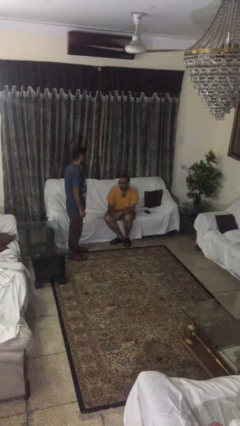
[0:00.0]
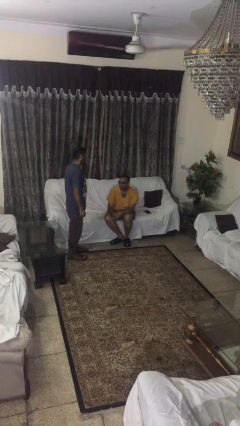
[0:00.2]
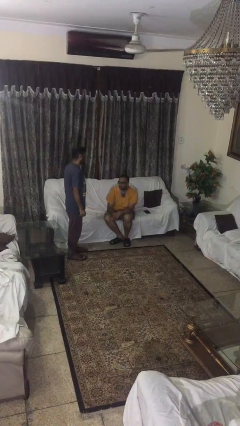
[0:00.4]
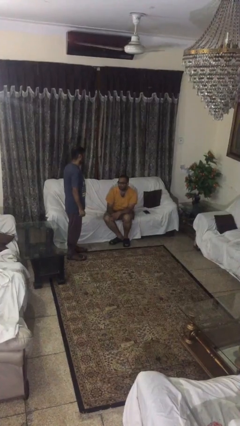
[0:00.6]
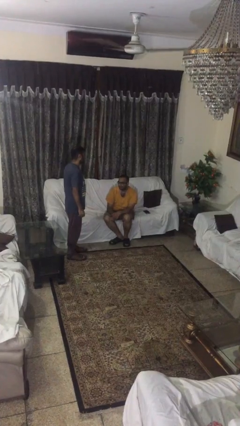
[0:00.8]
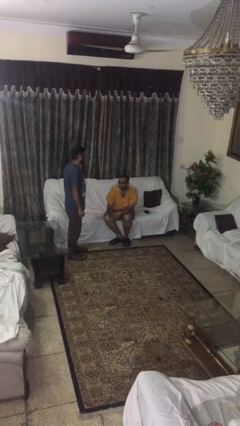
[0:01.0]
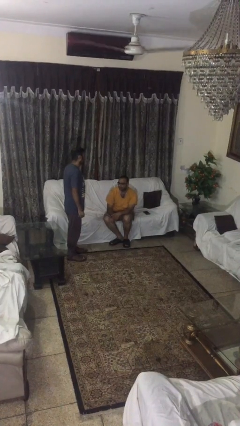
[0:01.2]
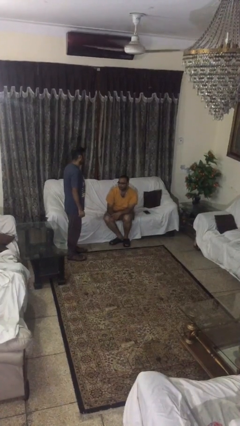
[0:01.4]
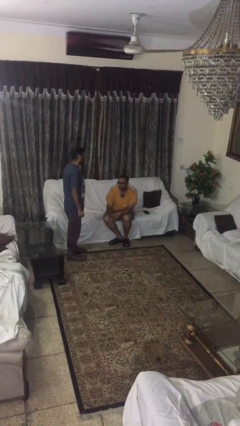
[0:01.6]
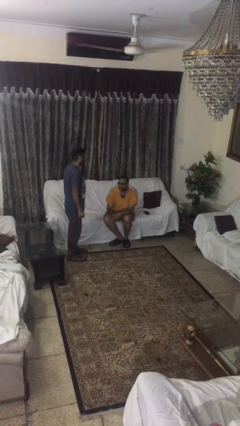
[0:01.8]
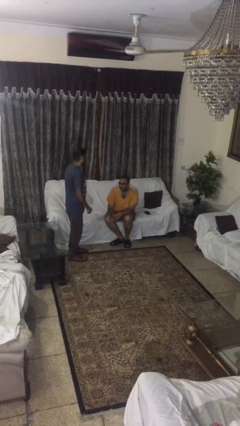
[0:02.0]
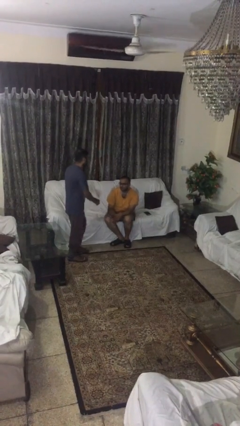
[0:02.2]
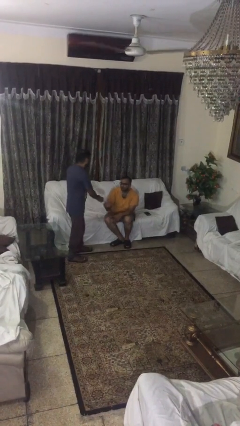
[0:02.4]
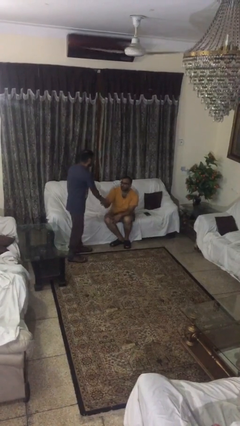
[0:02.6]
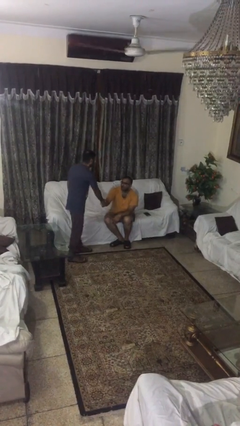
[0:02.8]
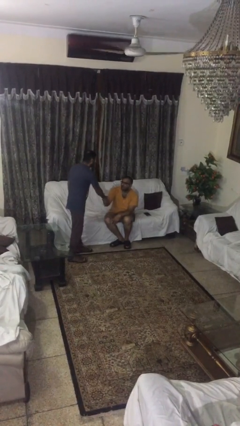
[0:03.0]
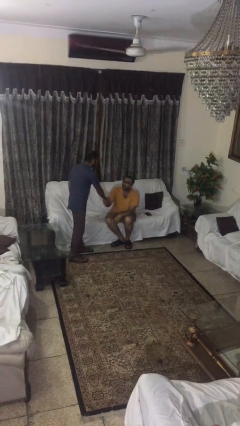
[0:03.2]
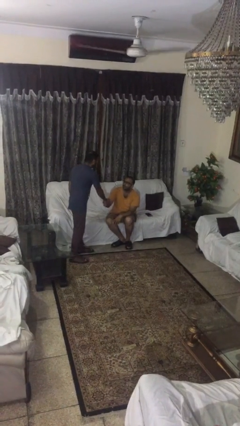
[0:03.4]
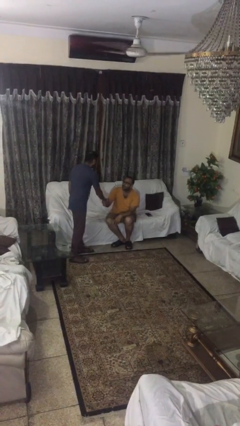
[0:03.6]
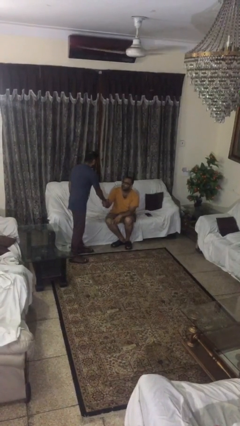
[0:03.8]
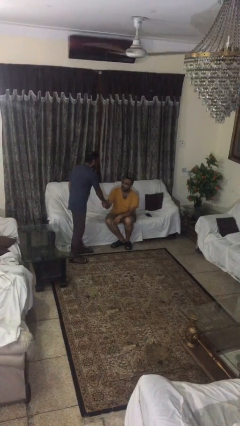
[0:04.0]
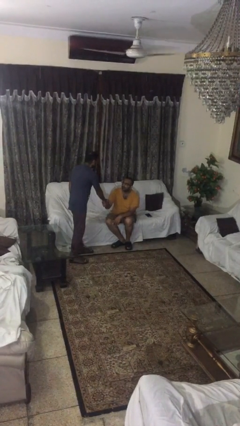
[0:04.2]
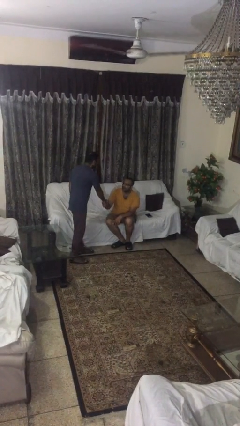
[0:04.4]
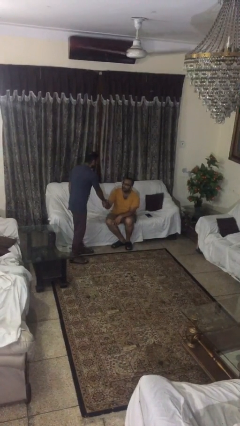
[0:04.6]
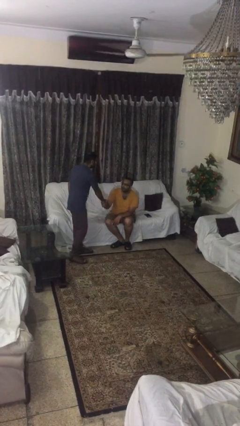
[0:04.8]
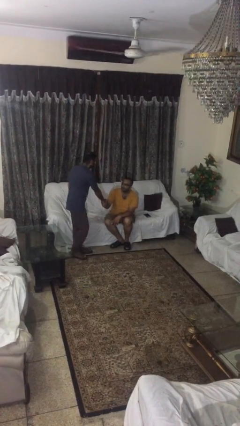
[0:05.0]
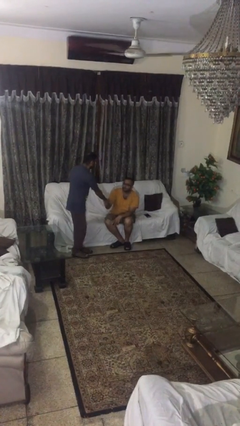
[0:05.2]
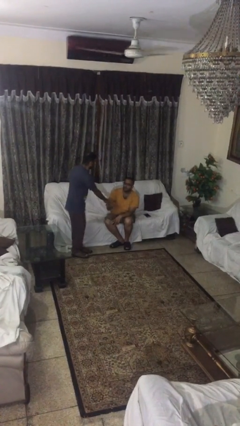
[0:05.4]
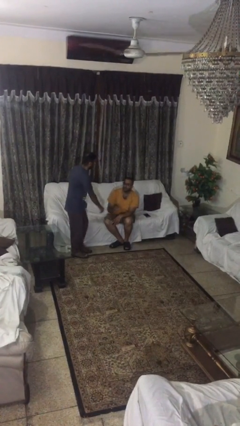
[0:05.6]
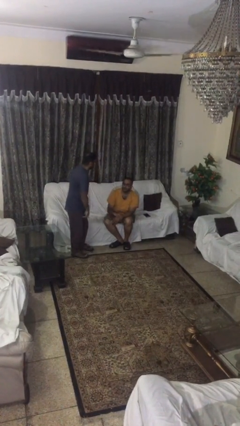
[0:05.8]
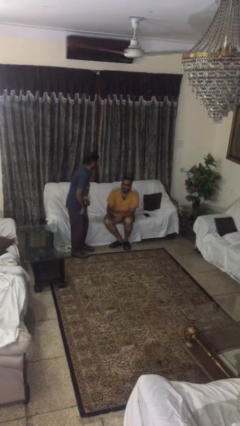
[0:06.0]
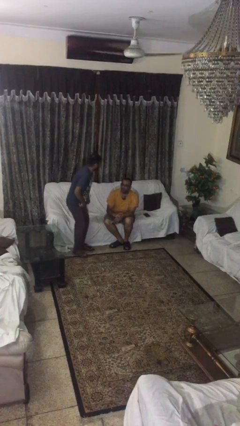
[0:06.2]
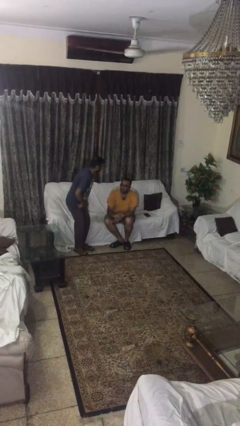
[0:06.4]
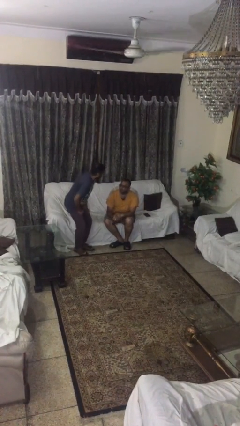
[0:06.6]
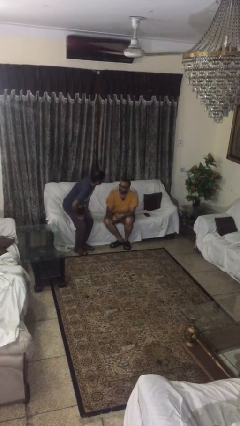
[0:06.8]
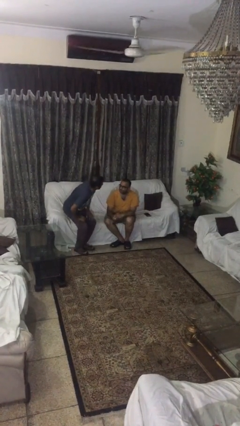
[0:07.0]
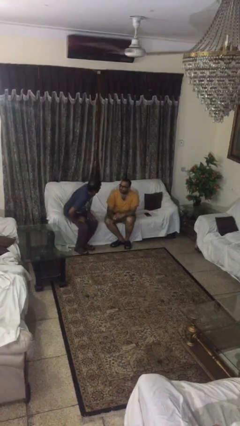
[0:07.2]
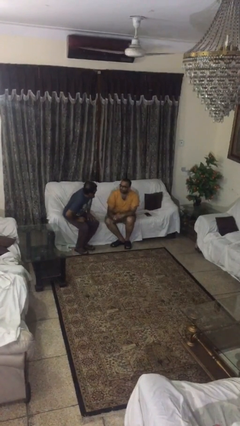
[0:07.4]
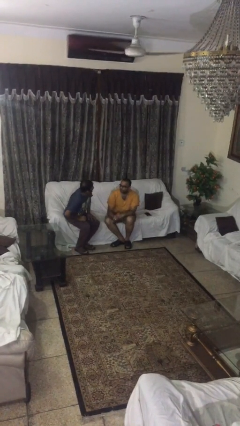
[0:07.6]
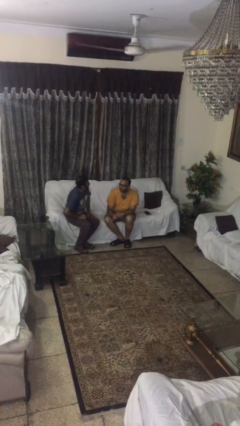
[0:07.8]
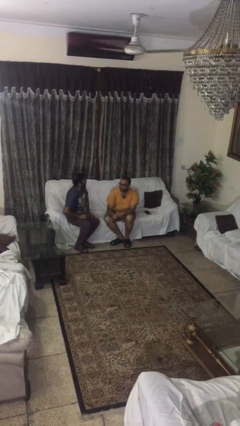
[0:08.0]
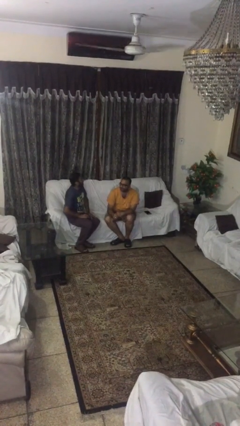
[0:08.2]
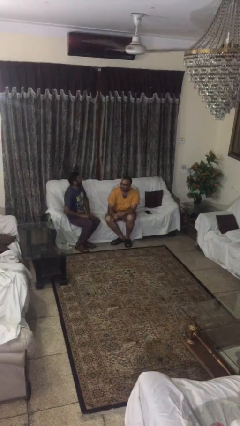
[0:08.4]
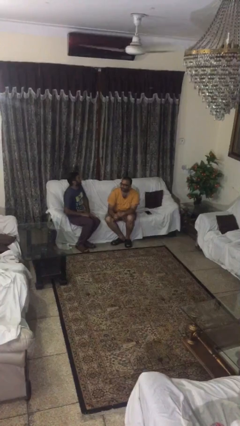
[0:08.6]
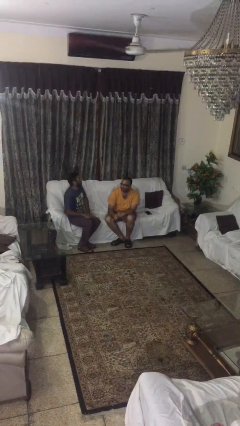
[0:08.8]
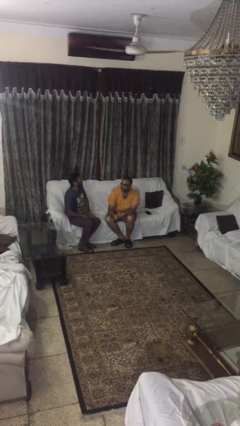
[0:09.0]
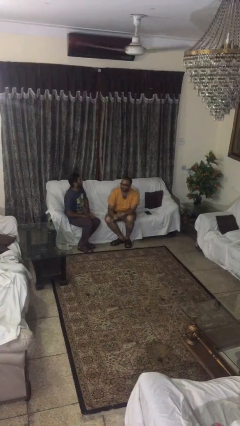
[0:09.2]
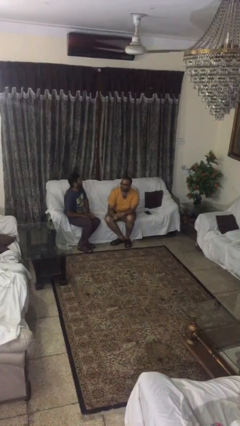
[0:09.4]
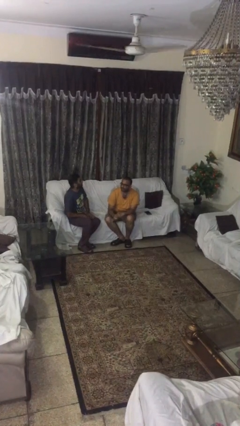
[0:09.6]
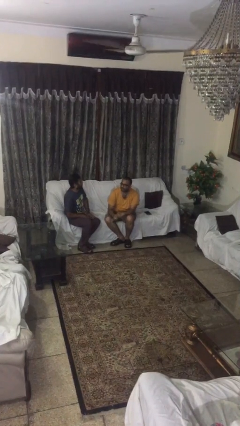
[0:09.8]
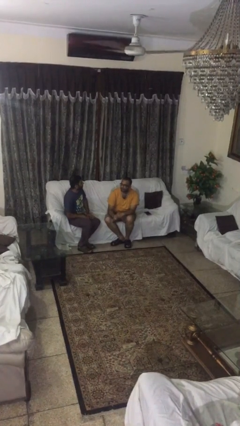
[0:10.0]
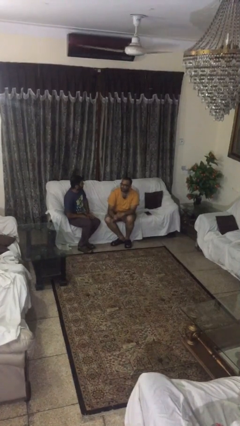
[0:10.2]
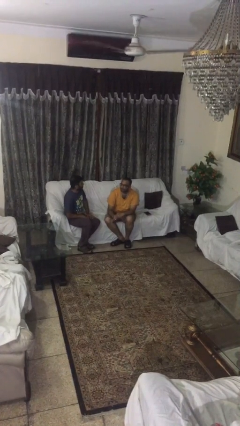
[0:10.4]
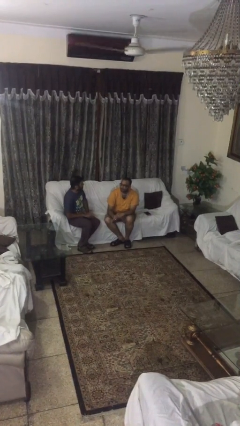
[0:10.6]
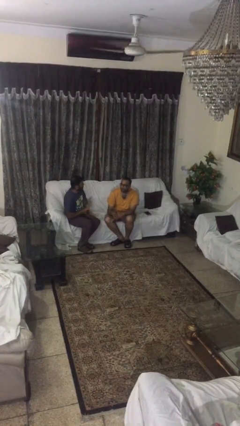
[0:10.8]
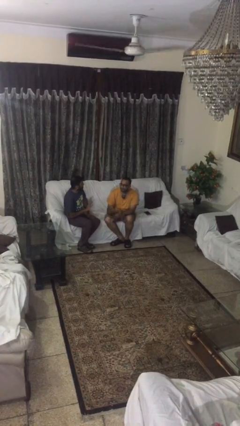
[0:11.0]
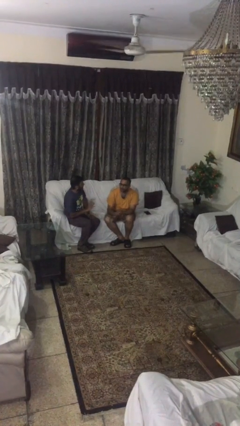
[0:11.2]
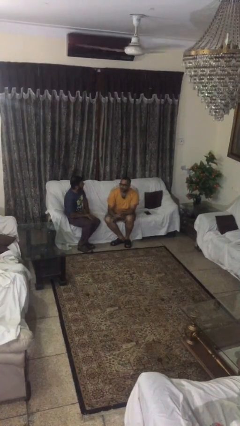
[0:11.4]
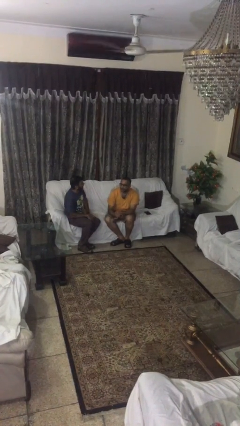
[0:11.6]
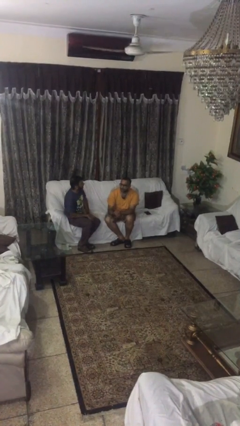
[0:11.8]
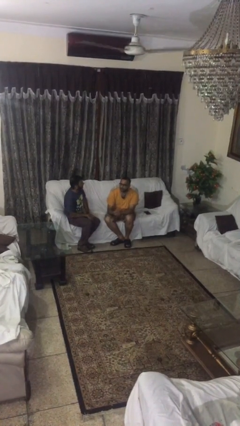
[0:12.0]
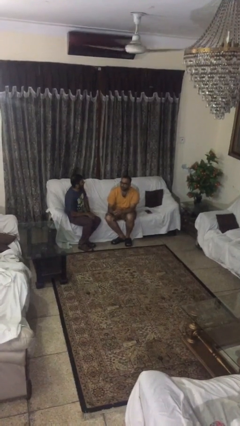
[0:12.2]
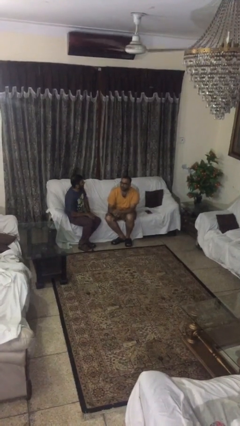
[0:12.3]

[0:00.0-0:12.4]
person shakes hand

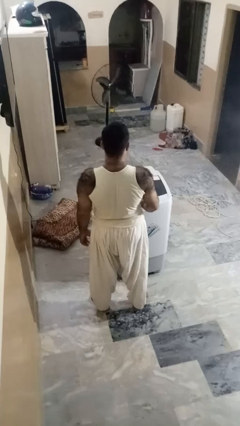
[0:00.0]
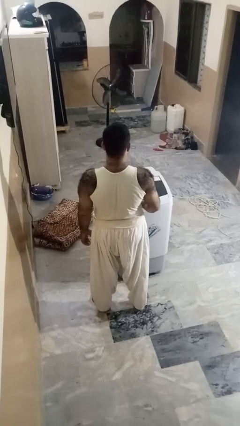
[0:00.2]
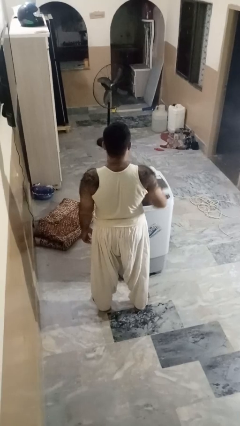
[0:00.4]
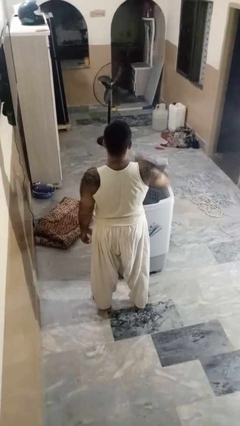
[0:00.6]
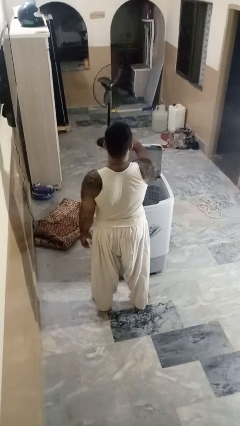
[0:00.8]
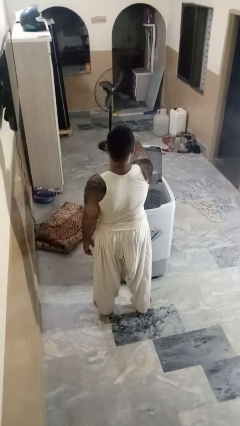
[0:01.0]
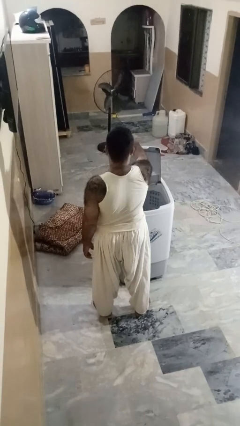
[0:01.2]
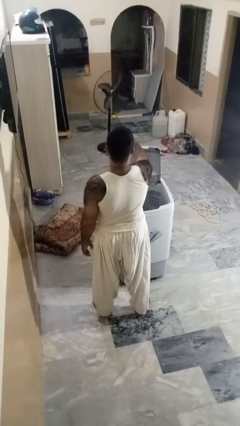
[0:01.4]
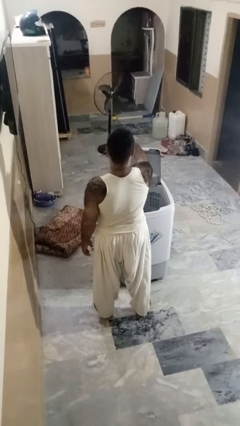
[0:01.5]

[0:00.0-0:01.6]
person opens clothes washer

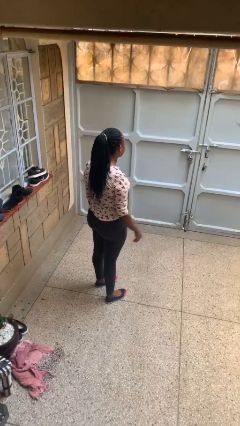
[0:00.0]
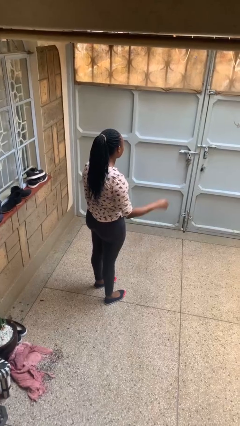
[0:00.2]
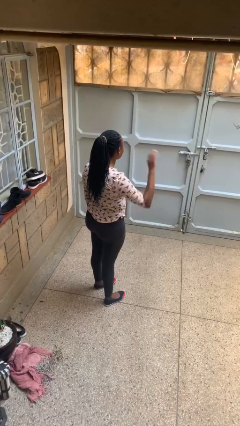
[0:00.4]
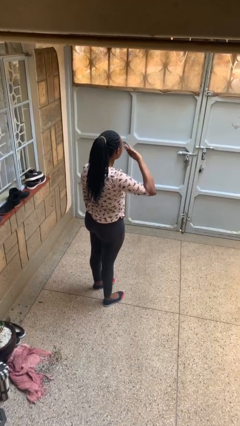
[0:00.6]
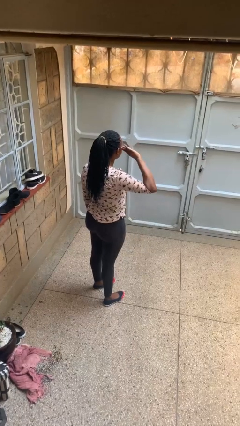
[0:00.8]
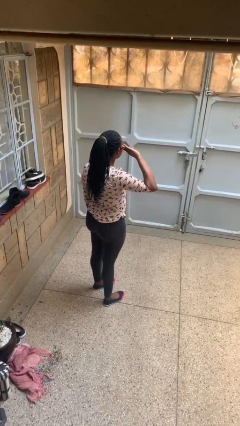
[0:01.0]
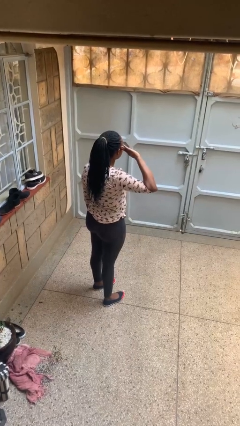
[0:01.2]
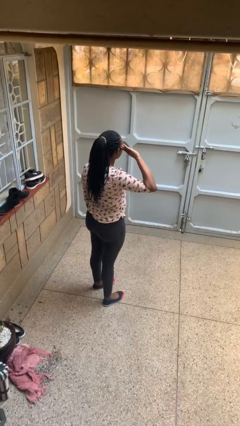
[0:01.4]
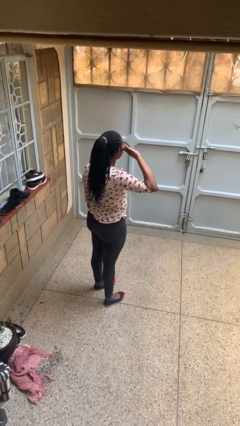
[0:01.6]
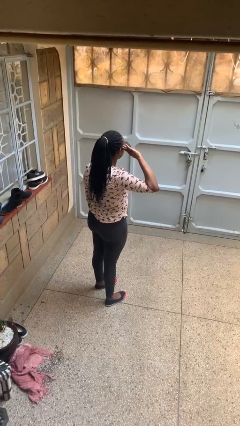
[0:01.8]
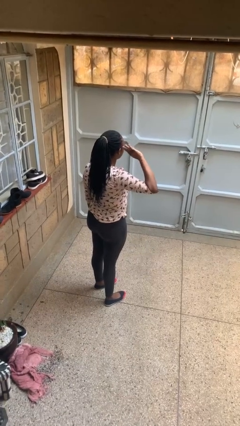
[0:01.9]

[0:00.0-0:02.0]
person salutes

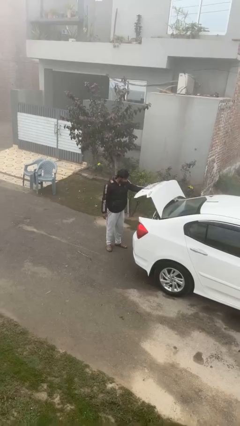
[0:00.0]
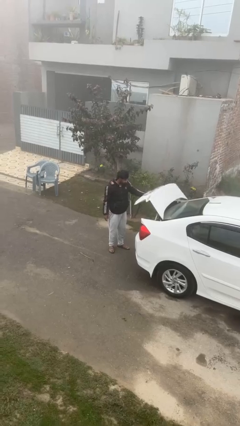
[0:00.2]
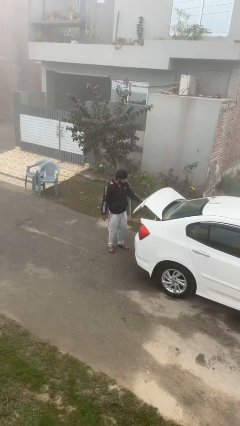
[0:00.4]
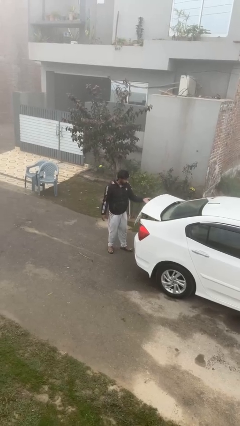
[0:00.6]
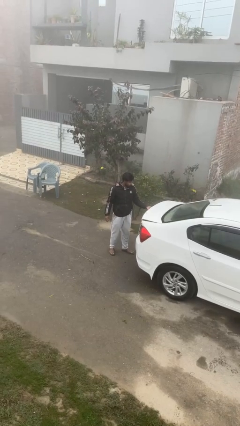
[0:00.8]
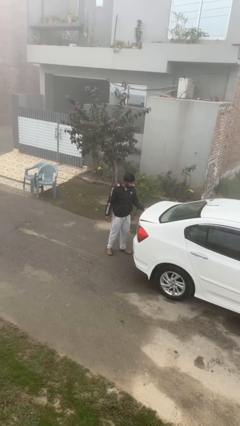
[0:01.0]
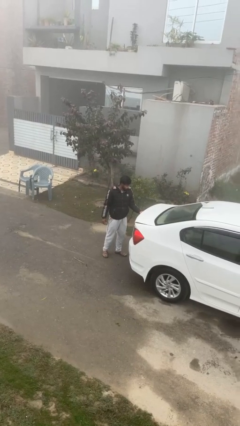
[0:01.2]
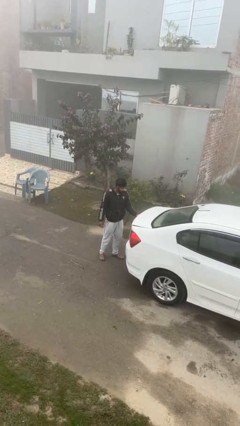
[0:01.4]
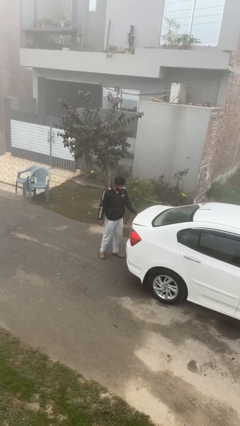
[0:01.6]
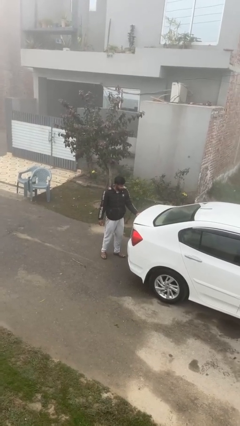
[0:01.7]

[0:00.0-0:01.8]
person closes car trunk
